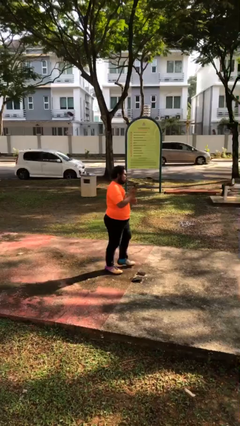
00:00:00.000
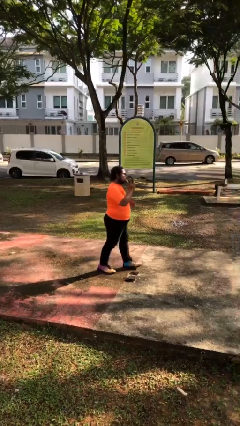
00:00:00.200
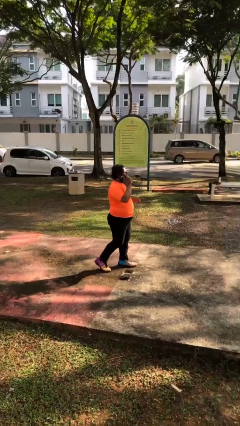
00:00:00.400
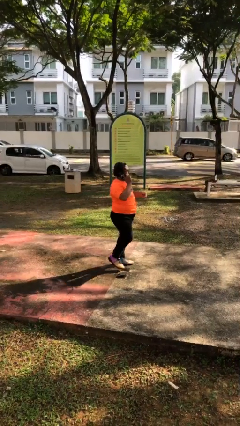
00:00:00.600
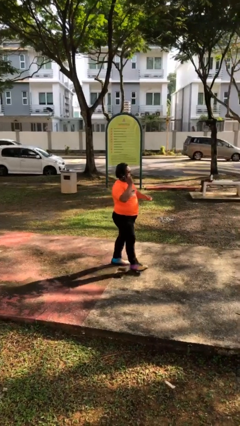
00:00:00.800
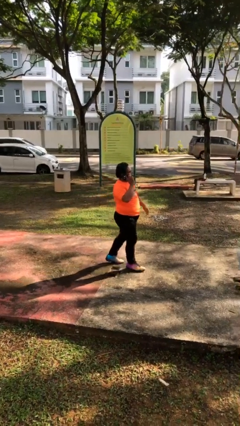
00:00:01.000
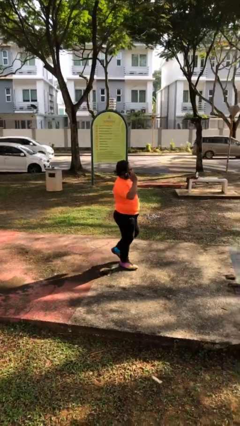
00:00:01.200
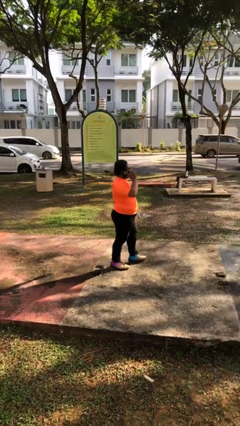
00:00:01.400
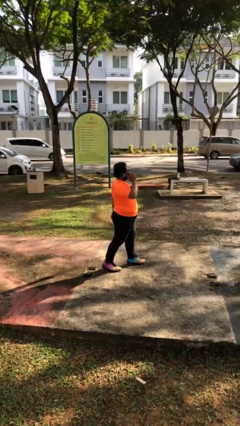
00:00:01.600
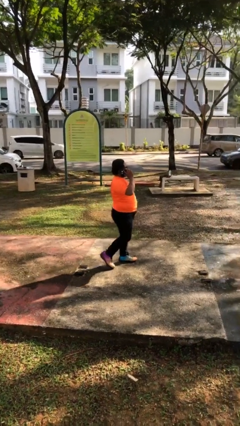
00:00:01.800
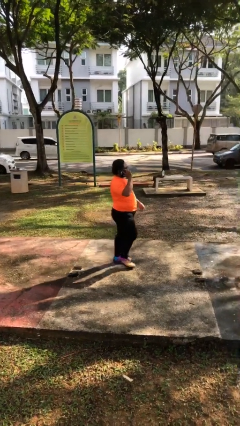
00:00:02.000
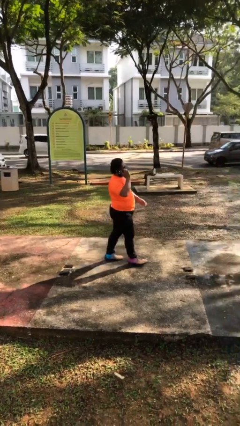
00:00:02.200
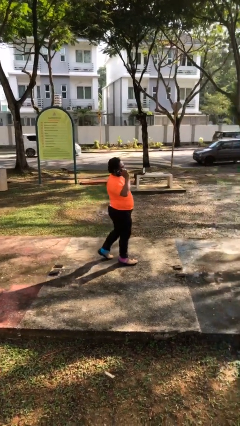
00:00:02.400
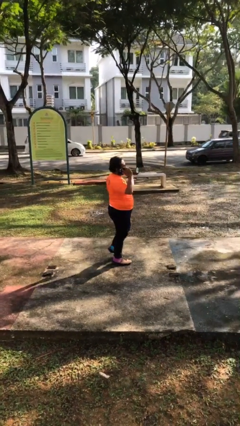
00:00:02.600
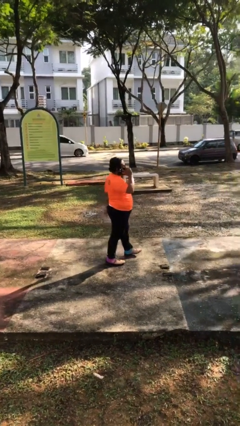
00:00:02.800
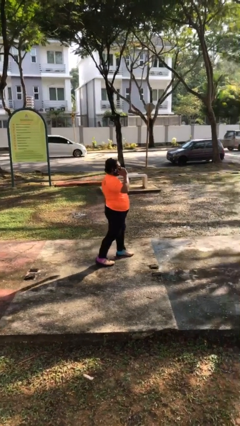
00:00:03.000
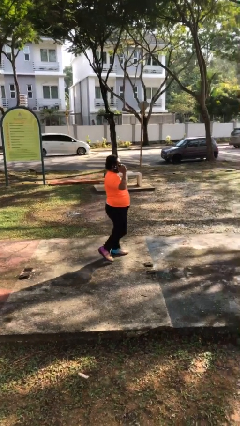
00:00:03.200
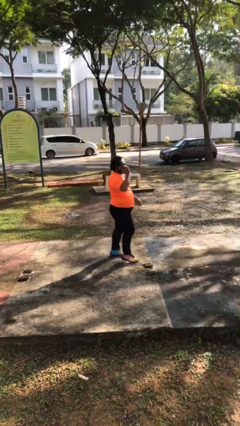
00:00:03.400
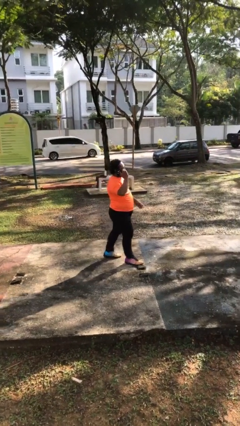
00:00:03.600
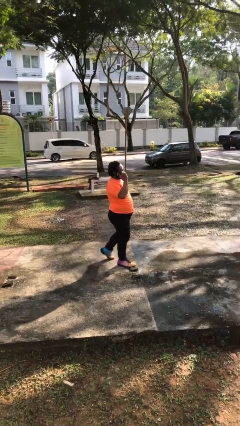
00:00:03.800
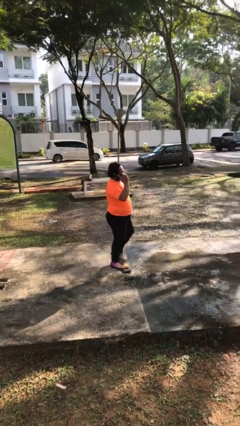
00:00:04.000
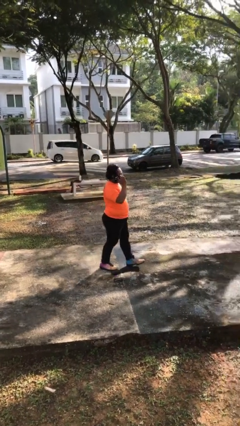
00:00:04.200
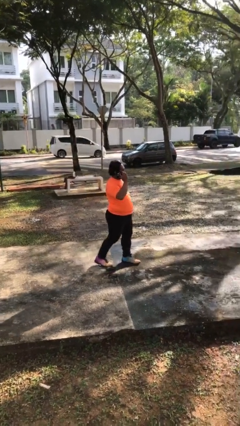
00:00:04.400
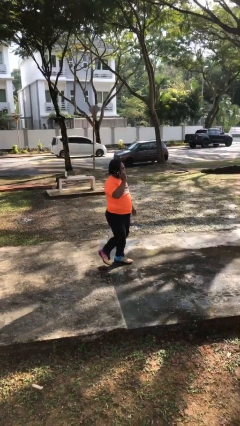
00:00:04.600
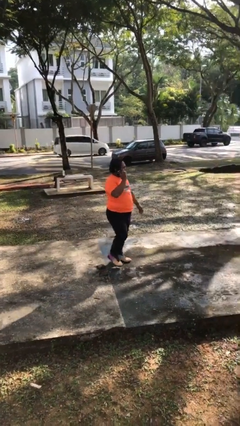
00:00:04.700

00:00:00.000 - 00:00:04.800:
person talks on phone

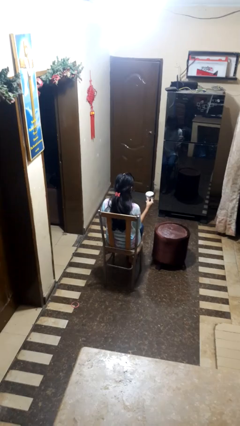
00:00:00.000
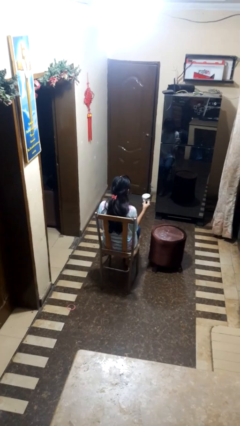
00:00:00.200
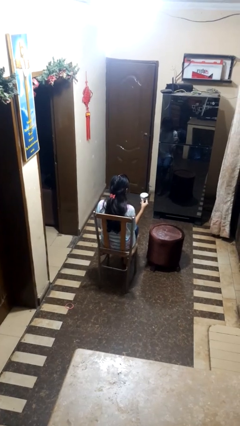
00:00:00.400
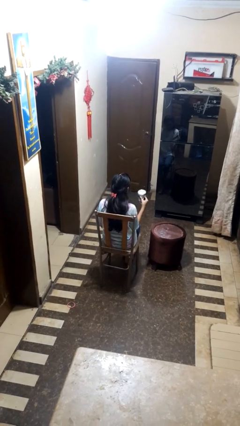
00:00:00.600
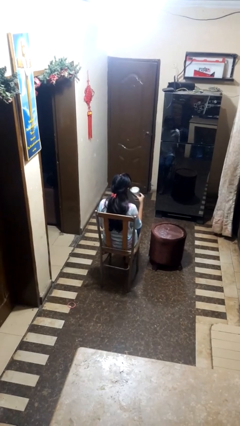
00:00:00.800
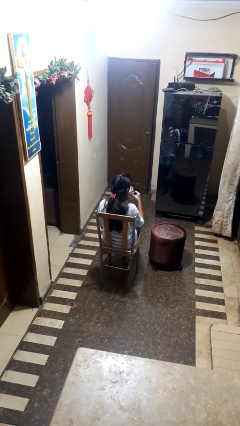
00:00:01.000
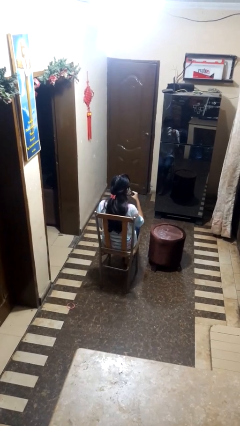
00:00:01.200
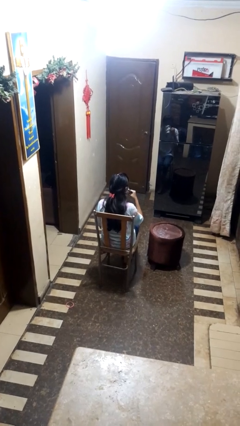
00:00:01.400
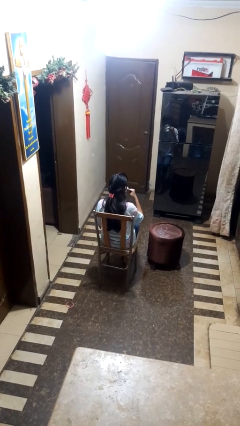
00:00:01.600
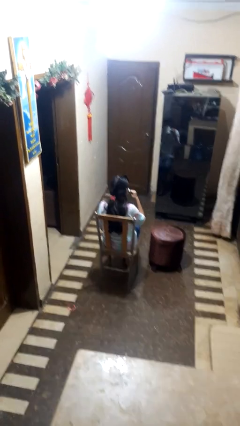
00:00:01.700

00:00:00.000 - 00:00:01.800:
person drinks from mug

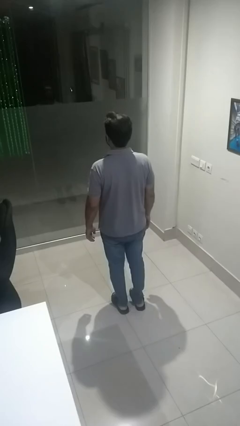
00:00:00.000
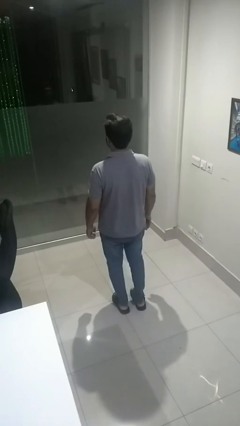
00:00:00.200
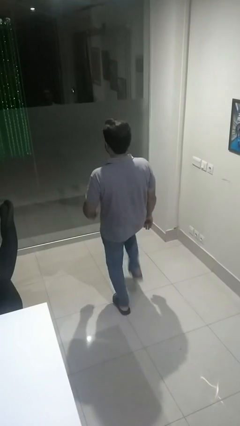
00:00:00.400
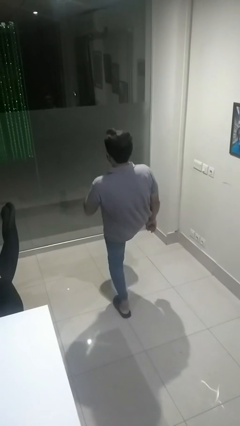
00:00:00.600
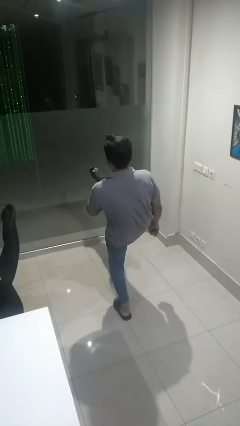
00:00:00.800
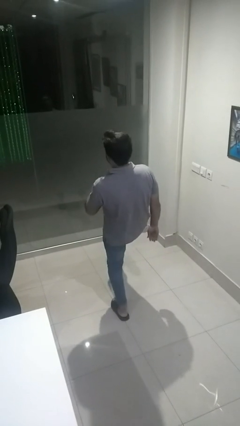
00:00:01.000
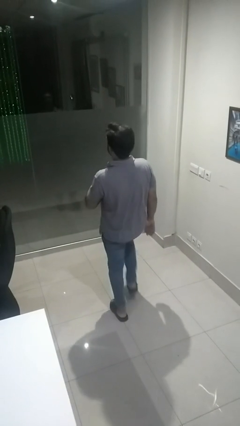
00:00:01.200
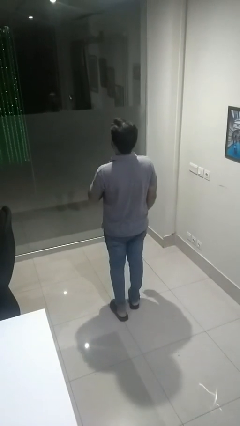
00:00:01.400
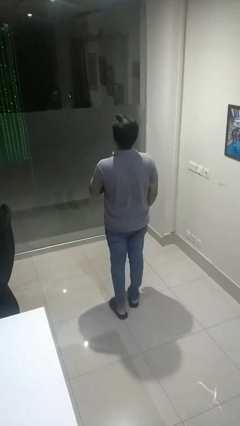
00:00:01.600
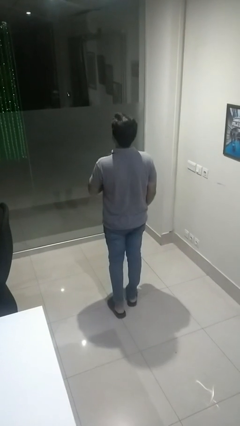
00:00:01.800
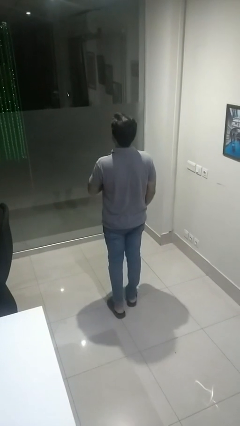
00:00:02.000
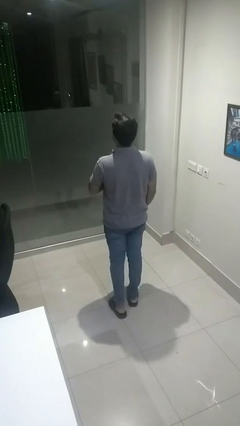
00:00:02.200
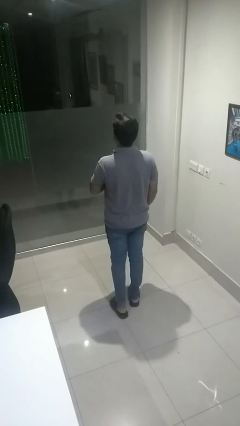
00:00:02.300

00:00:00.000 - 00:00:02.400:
person karate kicks

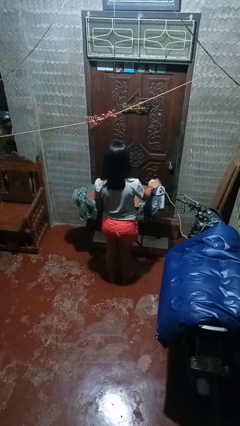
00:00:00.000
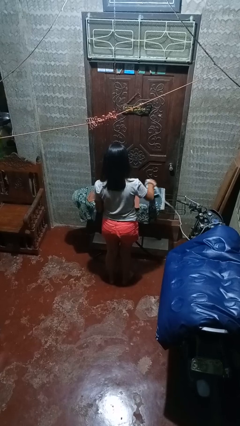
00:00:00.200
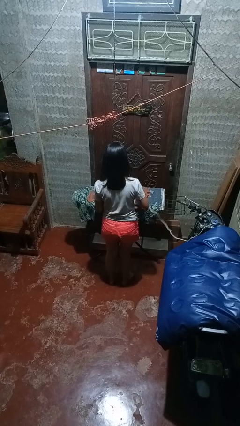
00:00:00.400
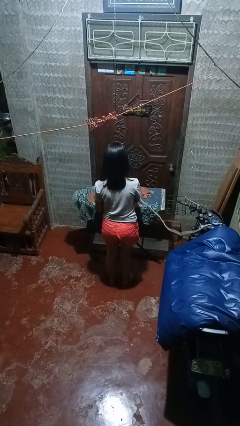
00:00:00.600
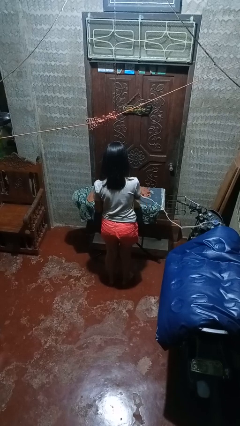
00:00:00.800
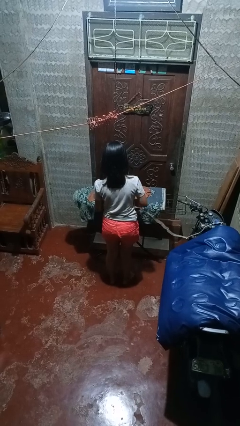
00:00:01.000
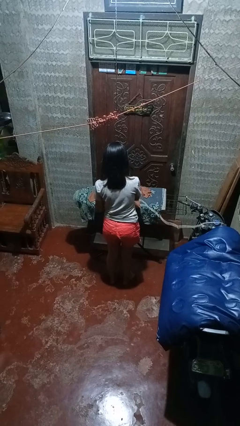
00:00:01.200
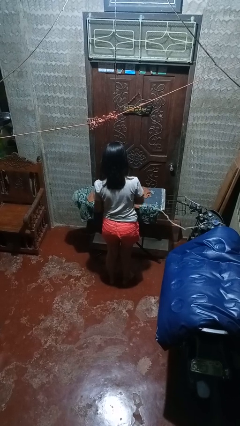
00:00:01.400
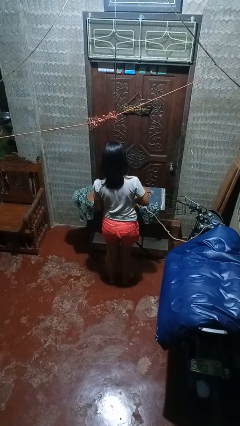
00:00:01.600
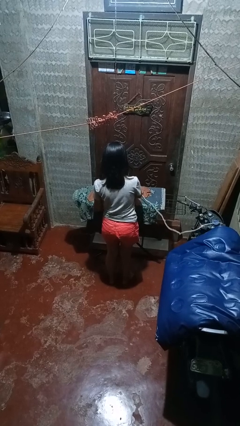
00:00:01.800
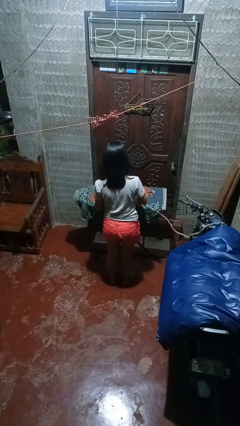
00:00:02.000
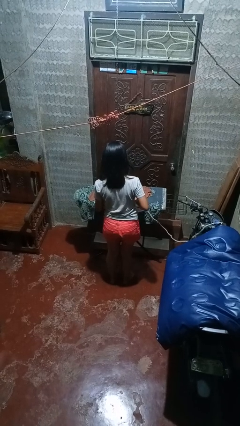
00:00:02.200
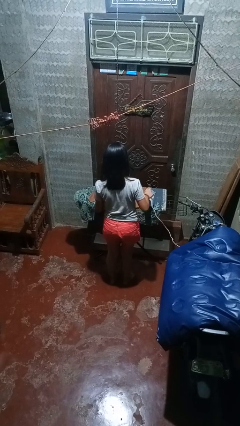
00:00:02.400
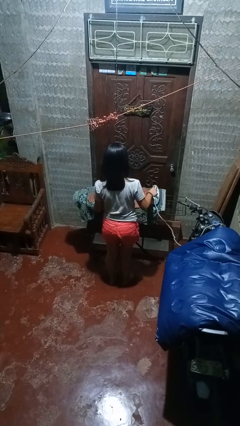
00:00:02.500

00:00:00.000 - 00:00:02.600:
person irons clothes

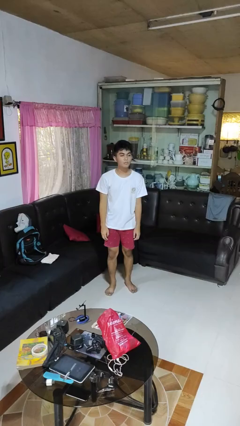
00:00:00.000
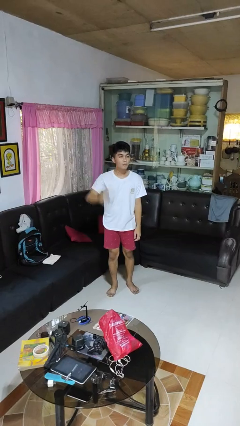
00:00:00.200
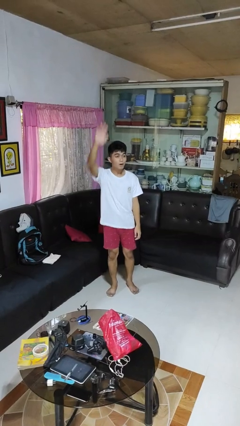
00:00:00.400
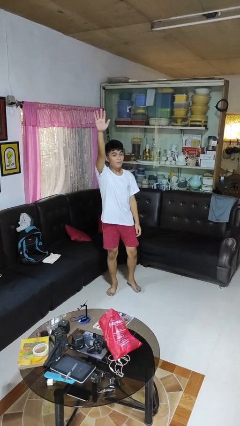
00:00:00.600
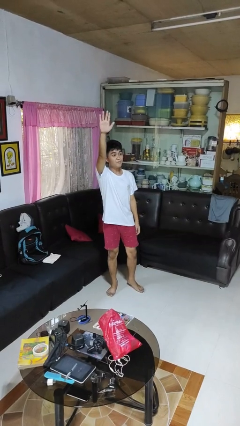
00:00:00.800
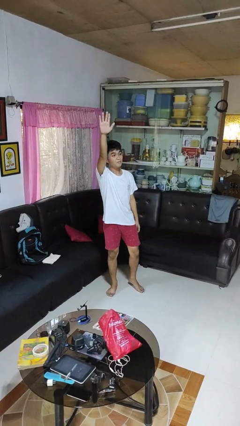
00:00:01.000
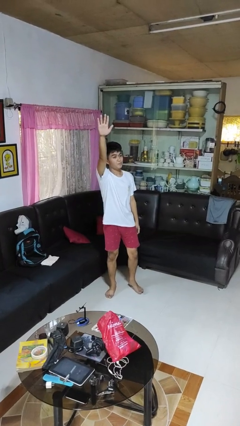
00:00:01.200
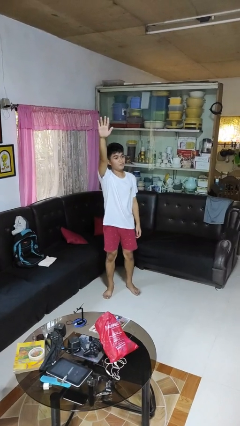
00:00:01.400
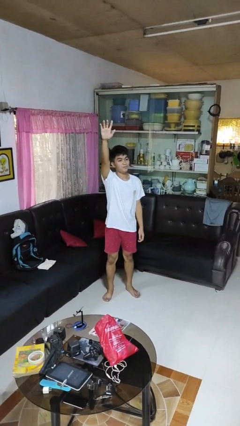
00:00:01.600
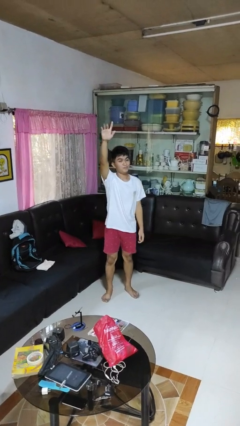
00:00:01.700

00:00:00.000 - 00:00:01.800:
person gestures raise hand

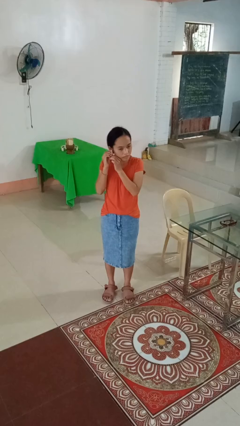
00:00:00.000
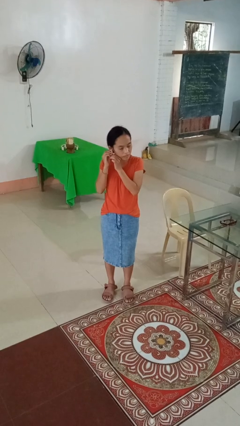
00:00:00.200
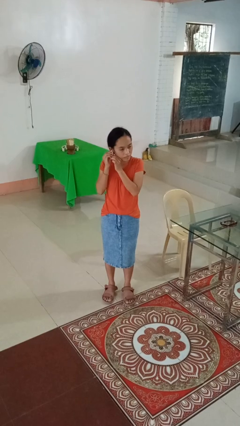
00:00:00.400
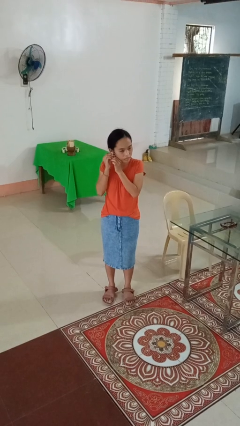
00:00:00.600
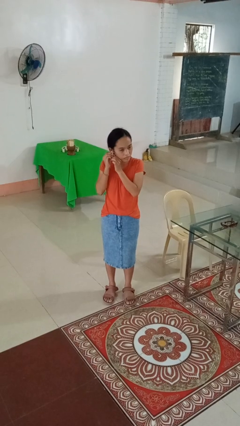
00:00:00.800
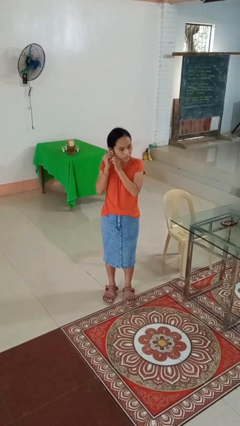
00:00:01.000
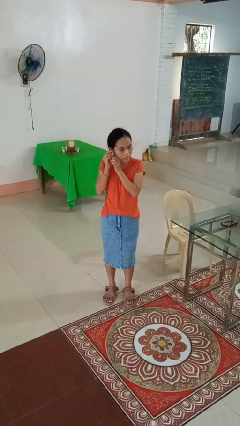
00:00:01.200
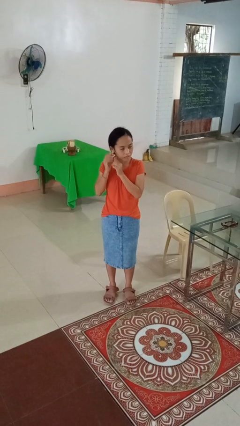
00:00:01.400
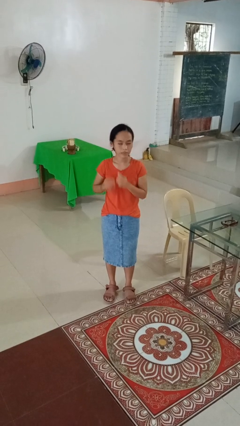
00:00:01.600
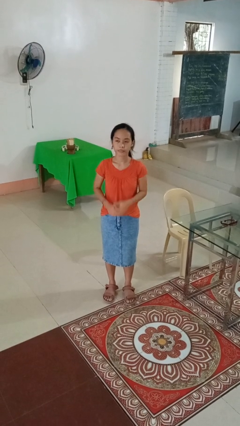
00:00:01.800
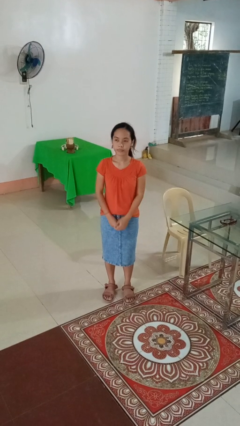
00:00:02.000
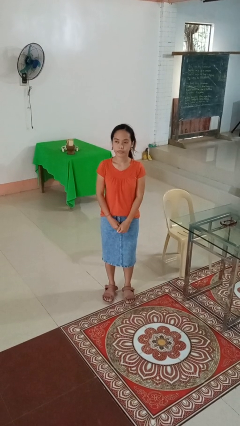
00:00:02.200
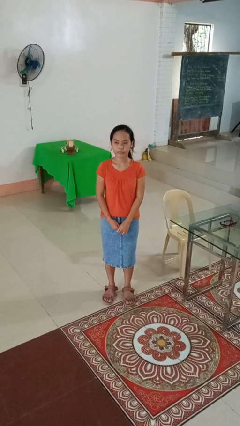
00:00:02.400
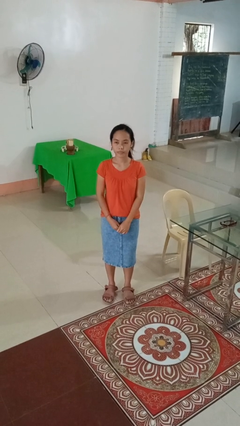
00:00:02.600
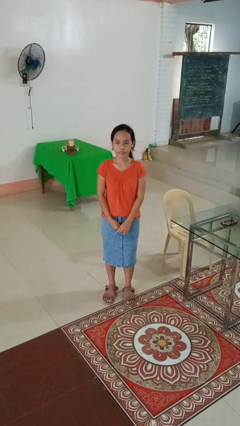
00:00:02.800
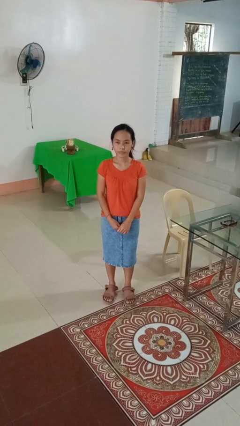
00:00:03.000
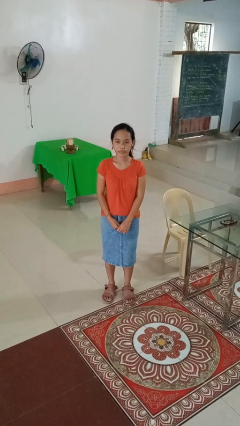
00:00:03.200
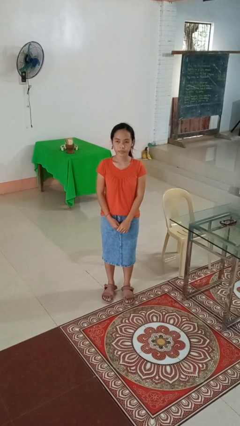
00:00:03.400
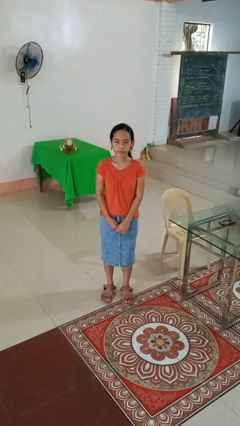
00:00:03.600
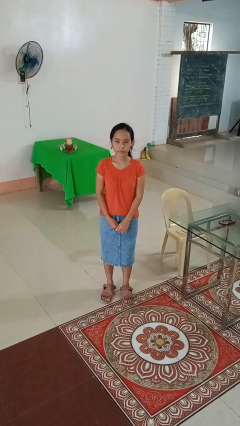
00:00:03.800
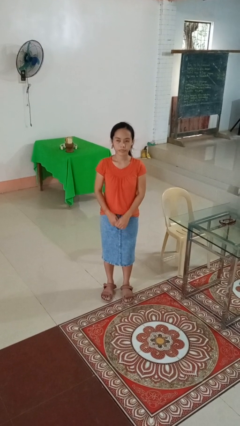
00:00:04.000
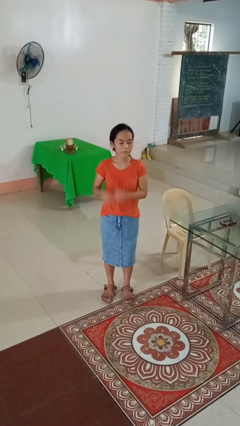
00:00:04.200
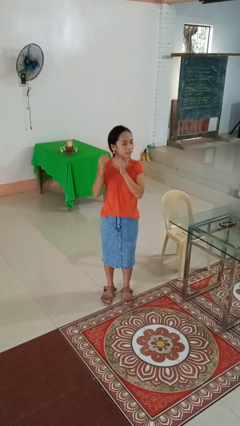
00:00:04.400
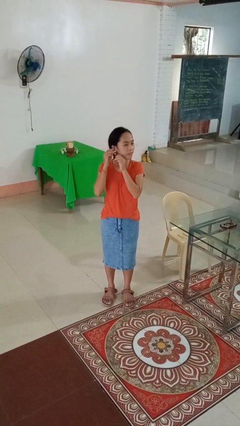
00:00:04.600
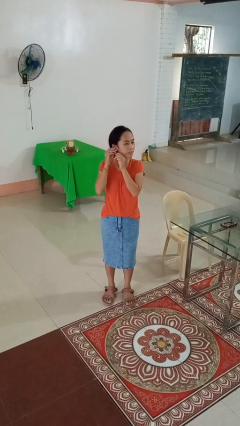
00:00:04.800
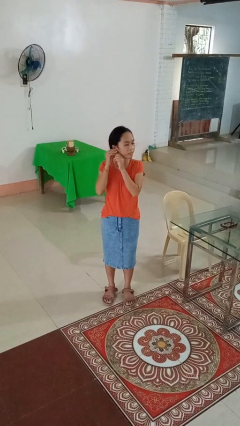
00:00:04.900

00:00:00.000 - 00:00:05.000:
person puts on earrings
